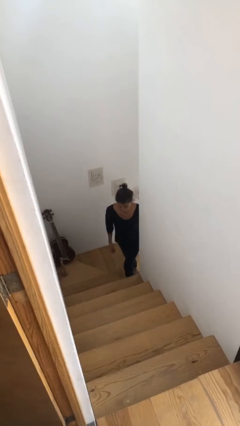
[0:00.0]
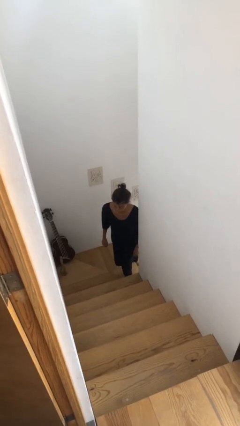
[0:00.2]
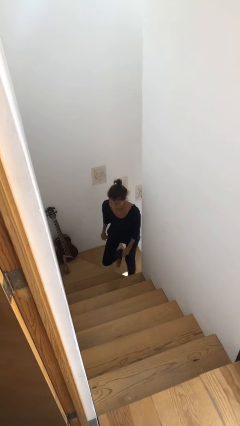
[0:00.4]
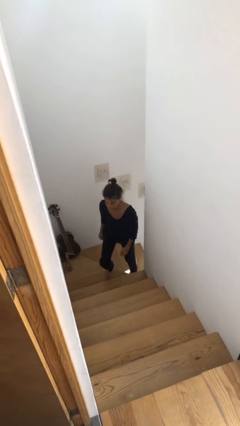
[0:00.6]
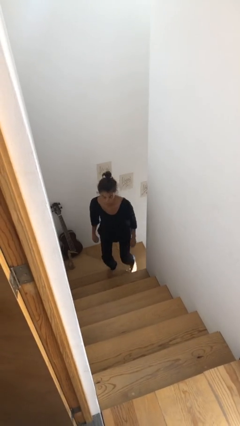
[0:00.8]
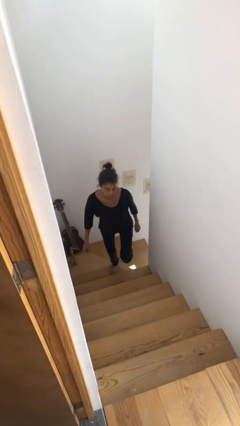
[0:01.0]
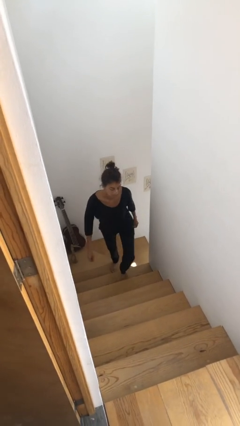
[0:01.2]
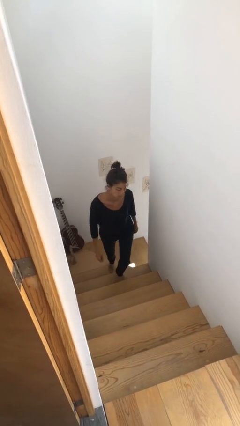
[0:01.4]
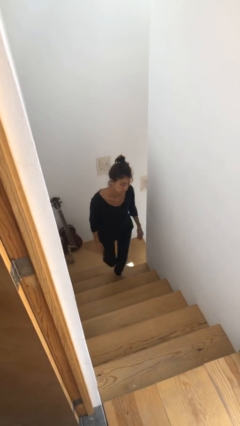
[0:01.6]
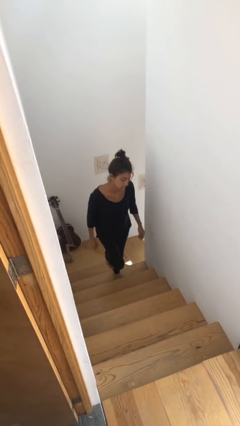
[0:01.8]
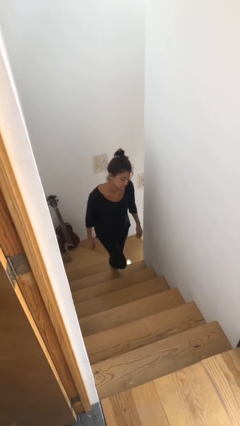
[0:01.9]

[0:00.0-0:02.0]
person climbs up stairs

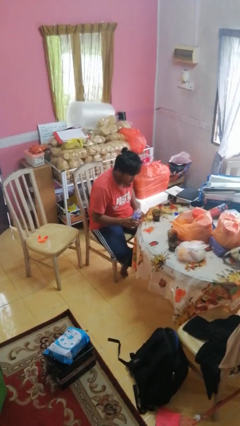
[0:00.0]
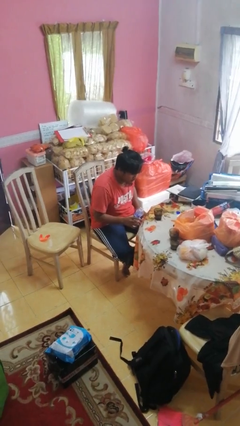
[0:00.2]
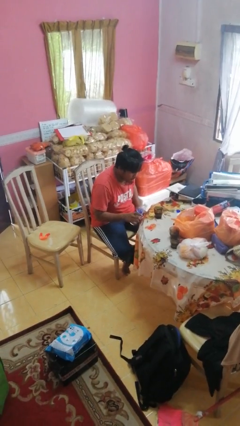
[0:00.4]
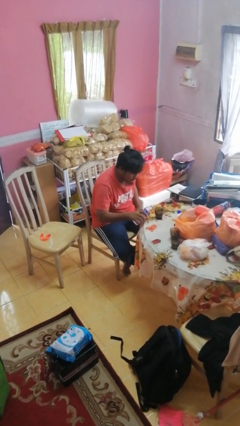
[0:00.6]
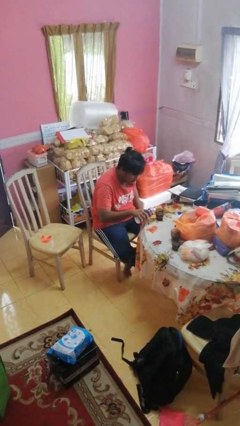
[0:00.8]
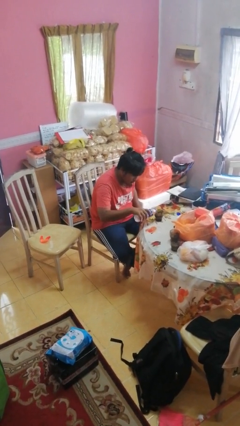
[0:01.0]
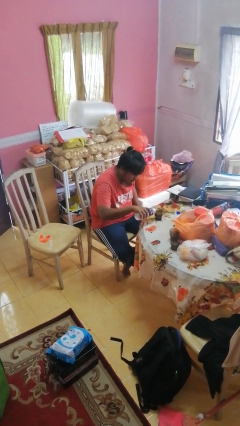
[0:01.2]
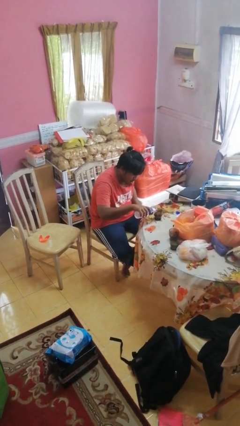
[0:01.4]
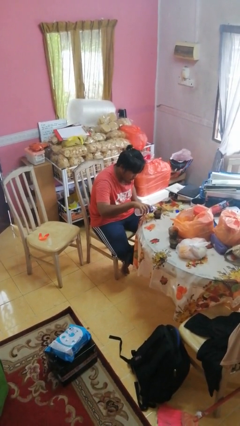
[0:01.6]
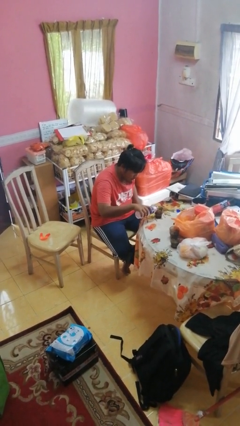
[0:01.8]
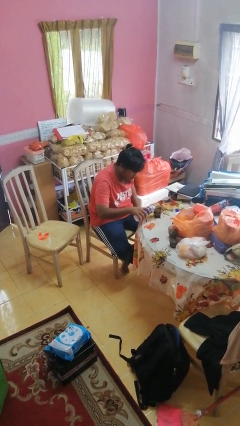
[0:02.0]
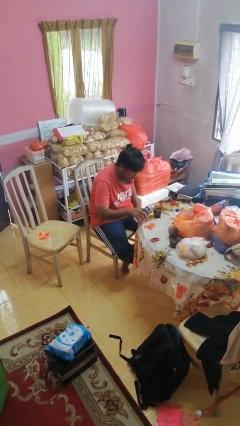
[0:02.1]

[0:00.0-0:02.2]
person pours liquid into cup

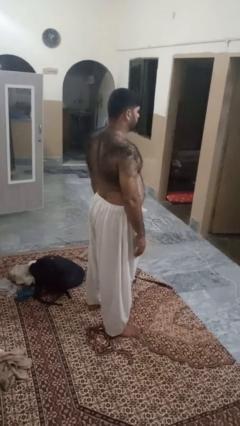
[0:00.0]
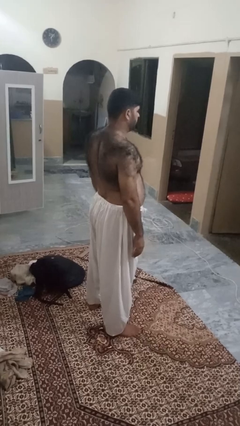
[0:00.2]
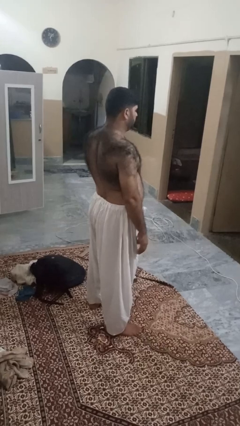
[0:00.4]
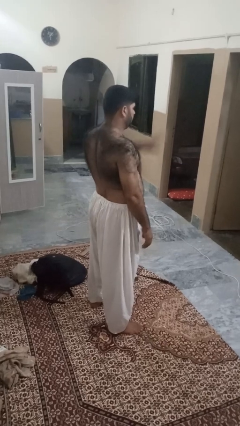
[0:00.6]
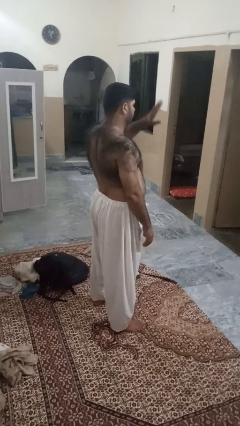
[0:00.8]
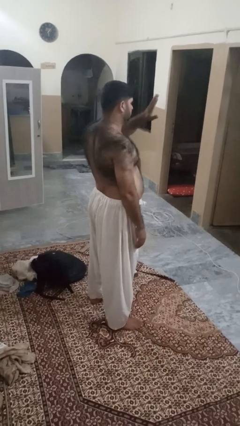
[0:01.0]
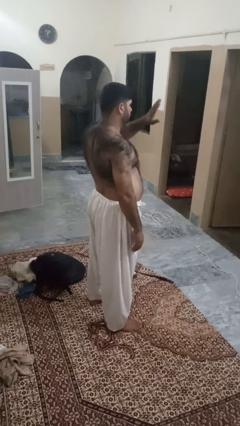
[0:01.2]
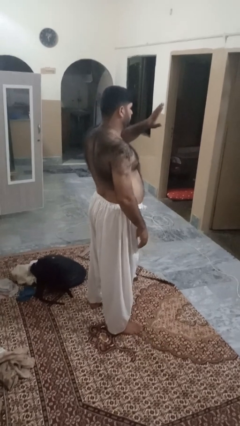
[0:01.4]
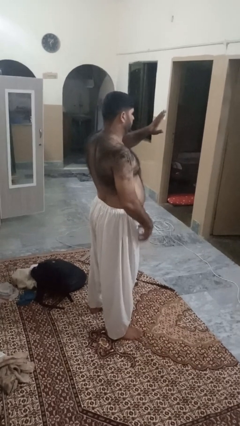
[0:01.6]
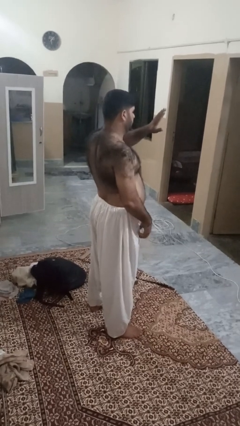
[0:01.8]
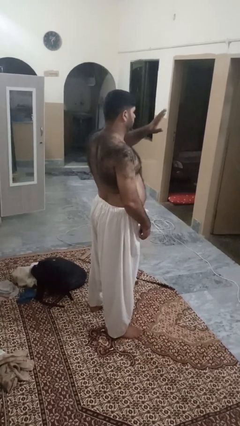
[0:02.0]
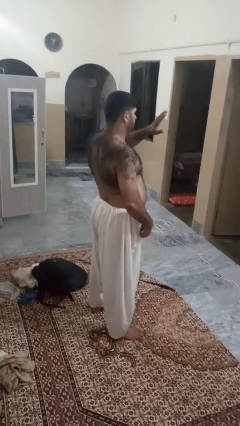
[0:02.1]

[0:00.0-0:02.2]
person gestures stop

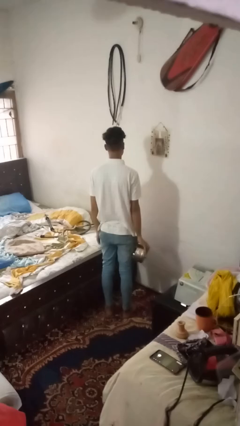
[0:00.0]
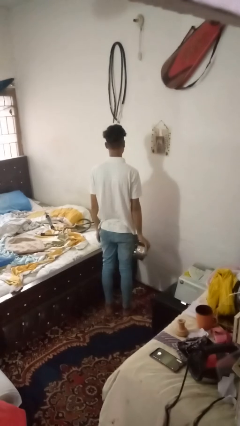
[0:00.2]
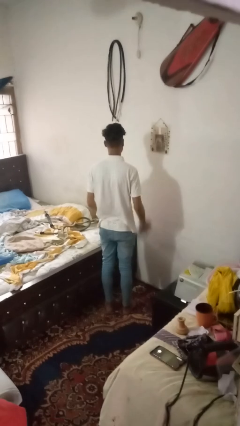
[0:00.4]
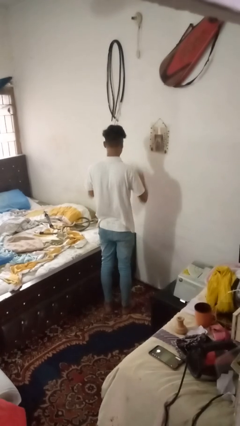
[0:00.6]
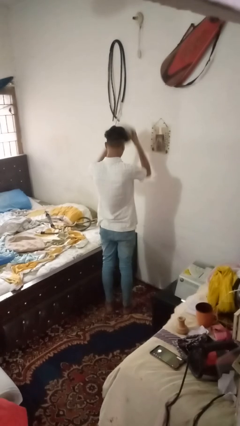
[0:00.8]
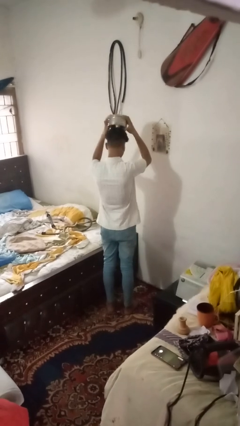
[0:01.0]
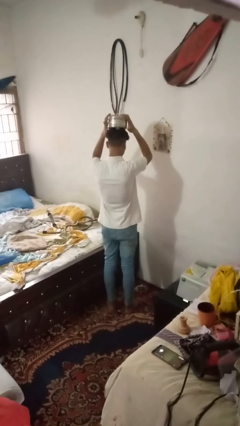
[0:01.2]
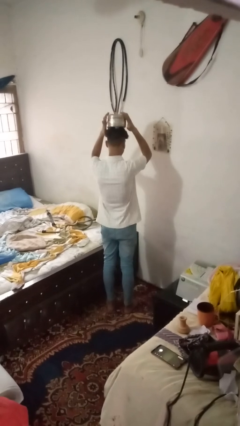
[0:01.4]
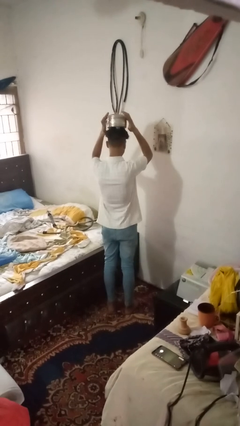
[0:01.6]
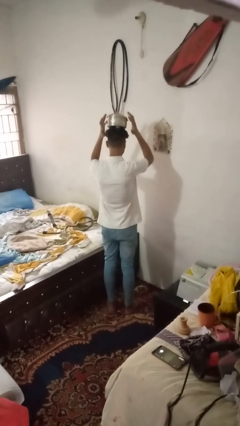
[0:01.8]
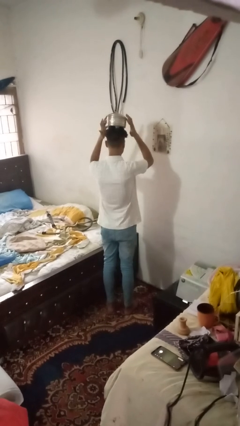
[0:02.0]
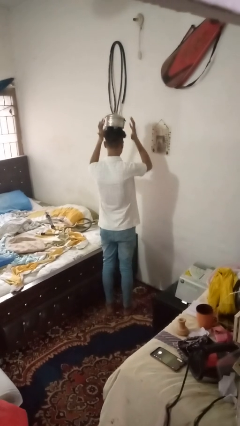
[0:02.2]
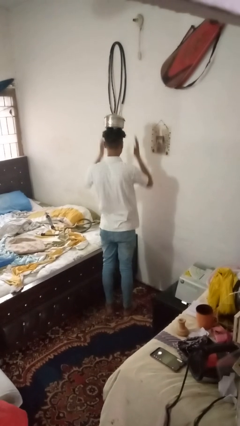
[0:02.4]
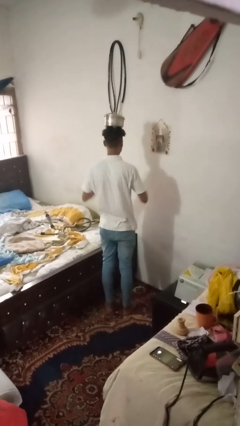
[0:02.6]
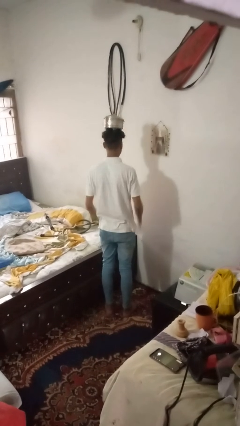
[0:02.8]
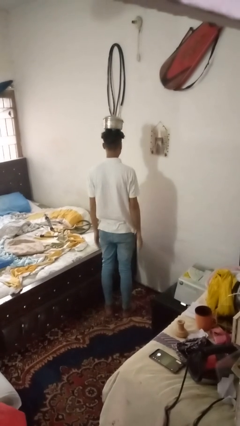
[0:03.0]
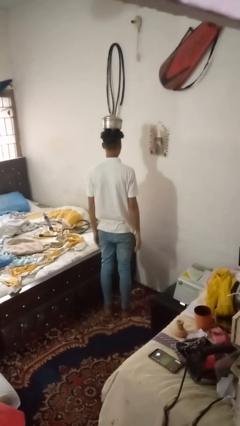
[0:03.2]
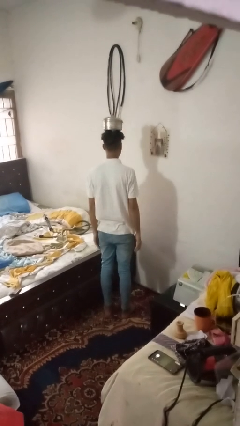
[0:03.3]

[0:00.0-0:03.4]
person holds object above head

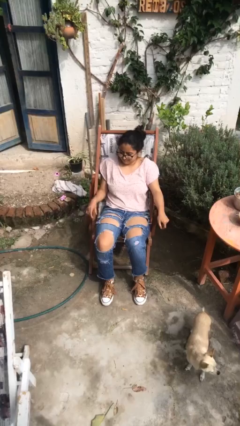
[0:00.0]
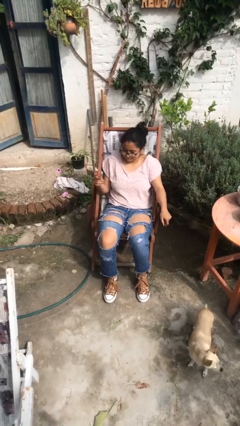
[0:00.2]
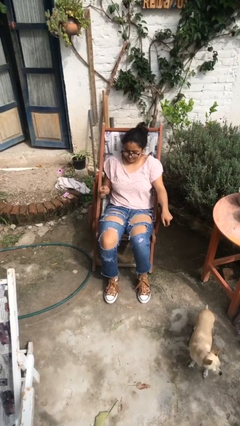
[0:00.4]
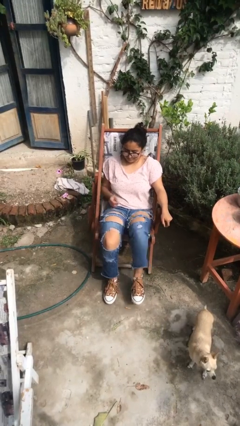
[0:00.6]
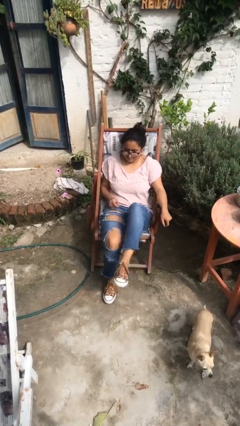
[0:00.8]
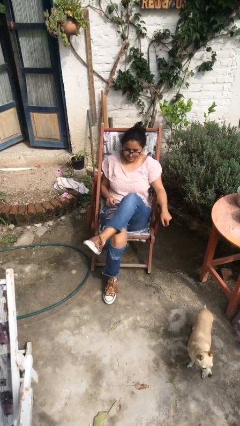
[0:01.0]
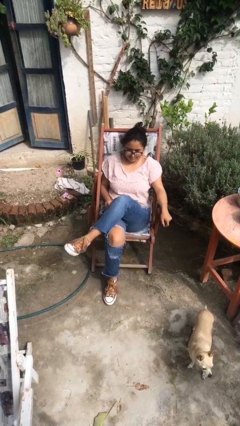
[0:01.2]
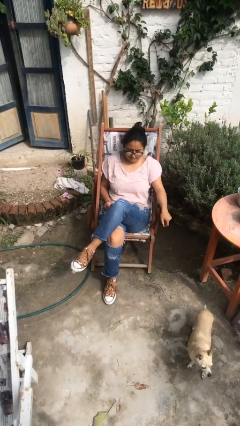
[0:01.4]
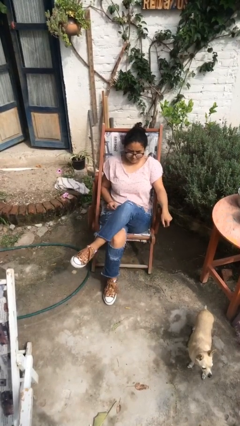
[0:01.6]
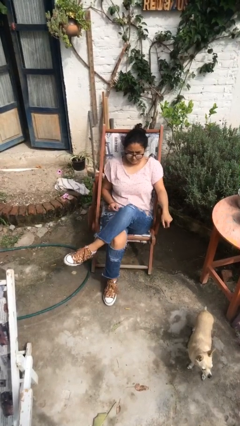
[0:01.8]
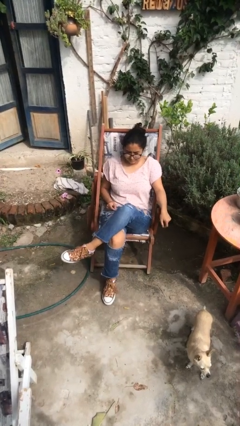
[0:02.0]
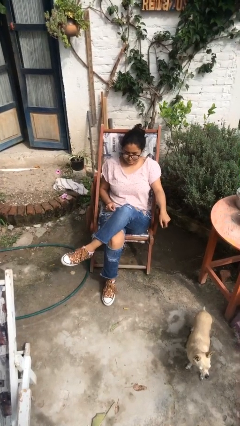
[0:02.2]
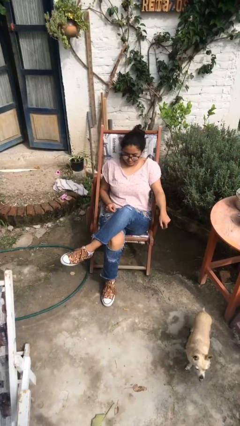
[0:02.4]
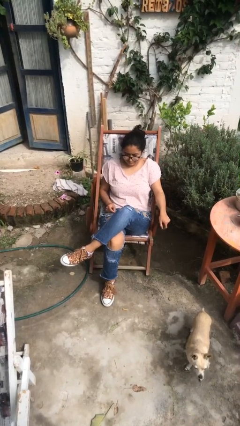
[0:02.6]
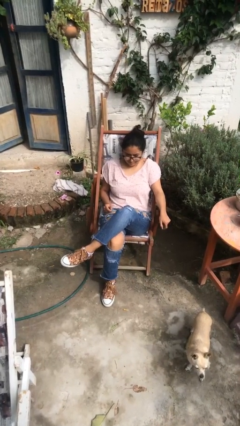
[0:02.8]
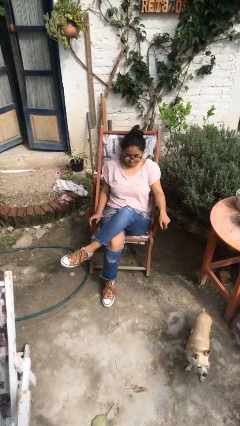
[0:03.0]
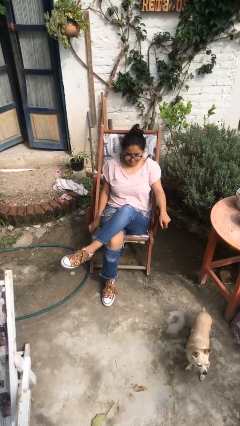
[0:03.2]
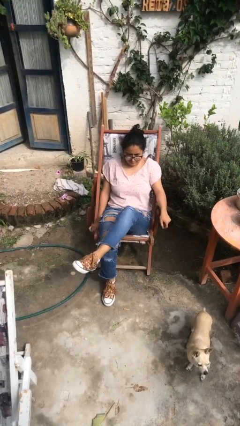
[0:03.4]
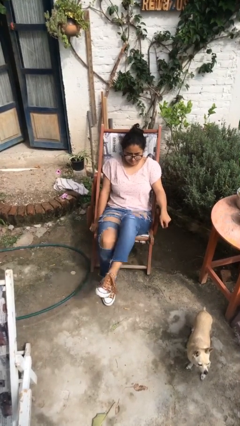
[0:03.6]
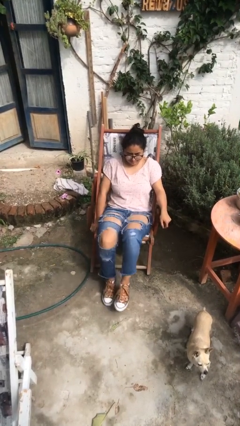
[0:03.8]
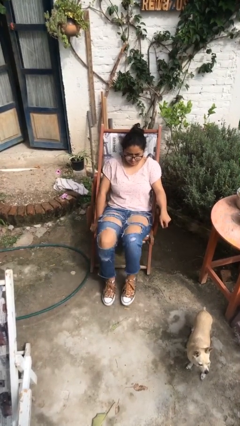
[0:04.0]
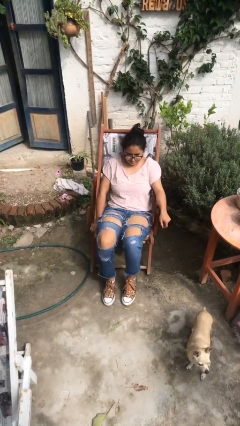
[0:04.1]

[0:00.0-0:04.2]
person crosses legs

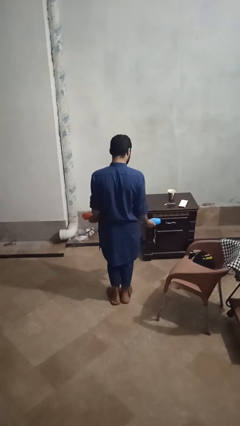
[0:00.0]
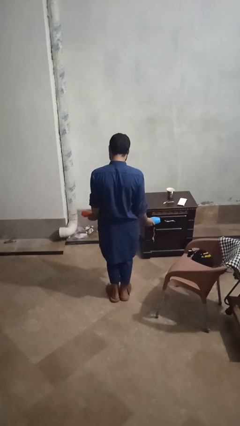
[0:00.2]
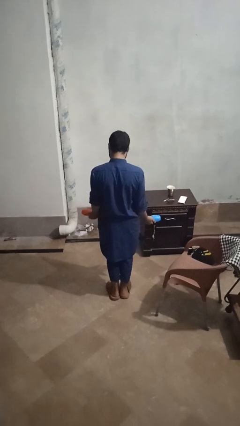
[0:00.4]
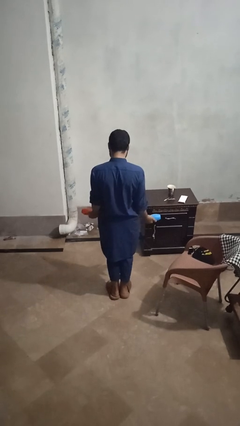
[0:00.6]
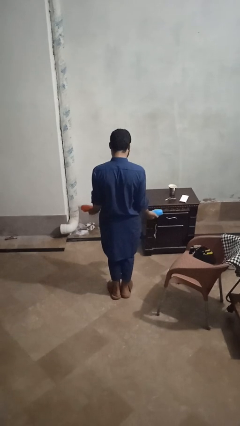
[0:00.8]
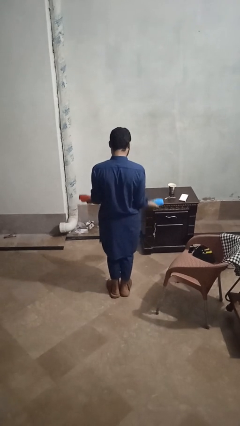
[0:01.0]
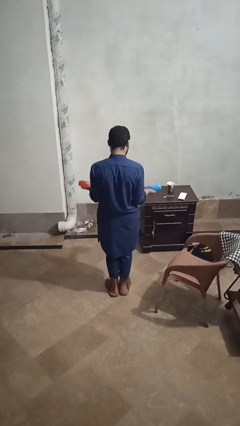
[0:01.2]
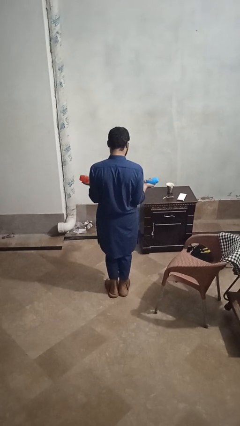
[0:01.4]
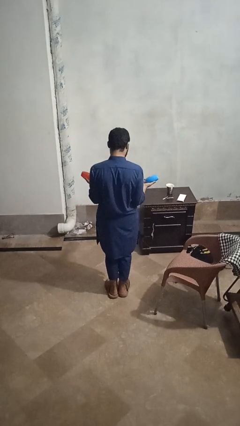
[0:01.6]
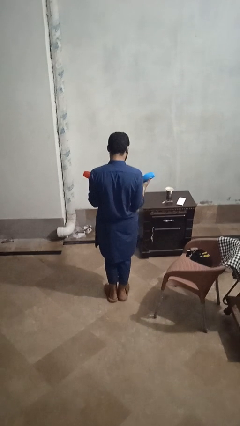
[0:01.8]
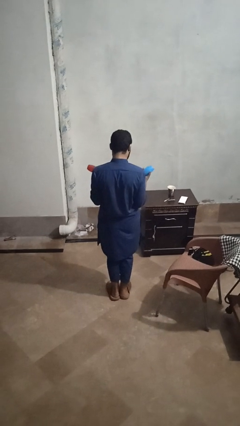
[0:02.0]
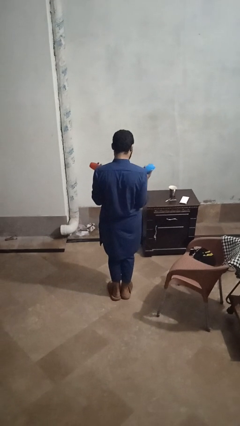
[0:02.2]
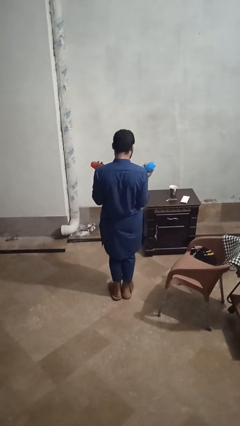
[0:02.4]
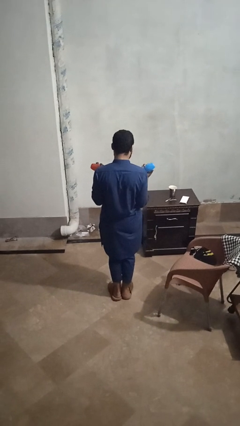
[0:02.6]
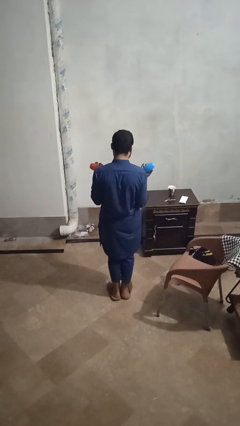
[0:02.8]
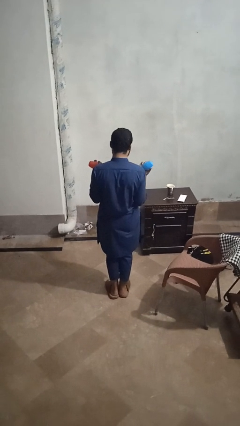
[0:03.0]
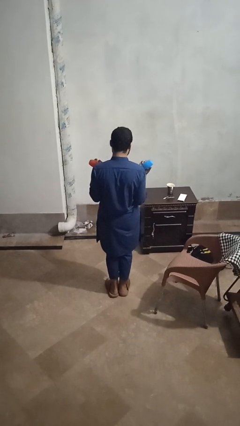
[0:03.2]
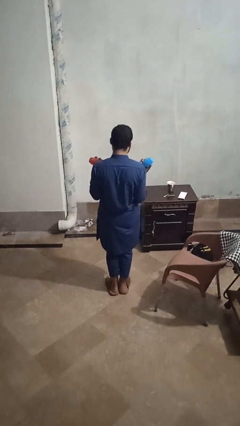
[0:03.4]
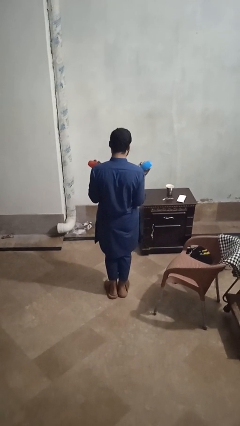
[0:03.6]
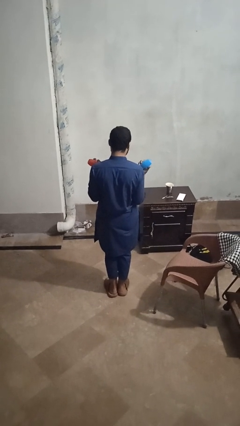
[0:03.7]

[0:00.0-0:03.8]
person lifts dumbbells
